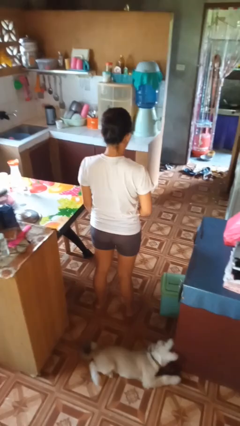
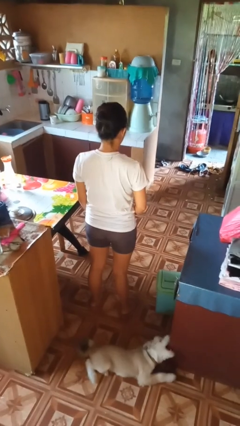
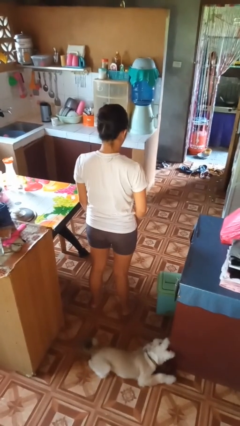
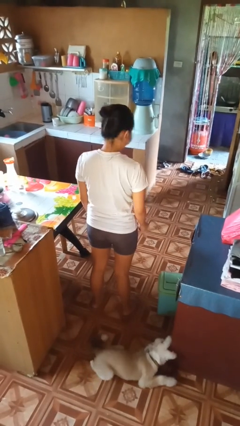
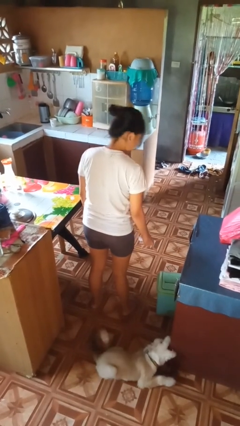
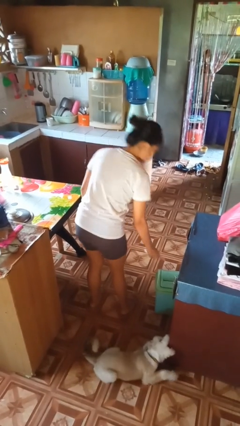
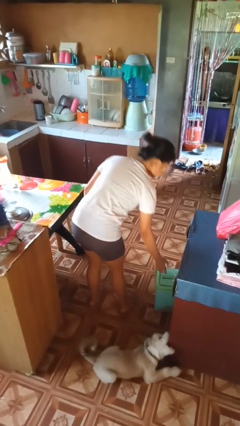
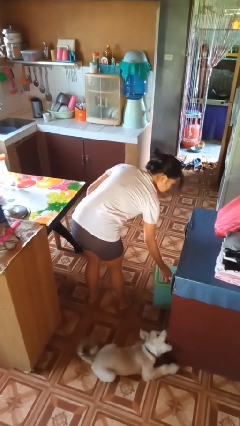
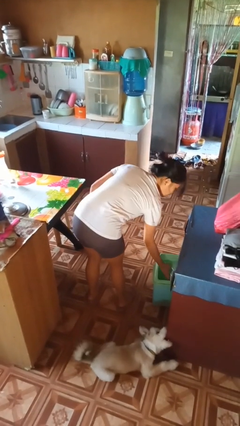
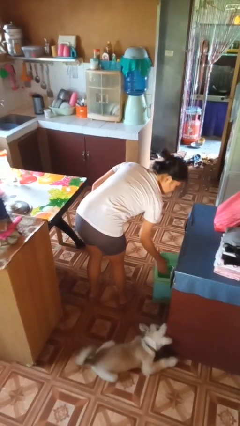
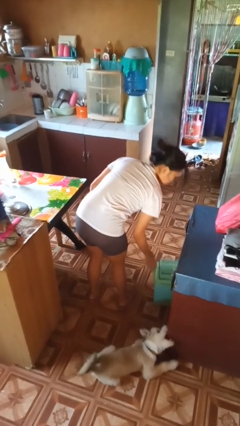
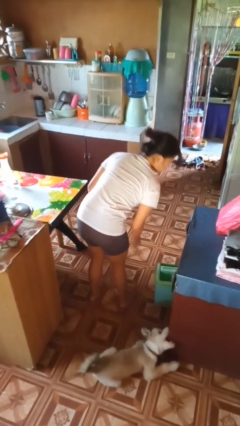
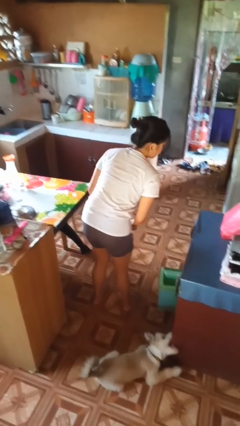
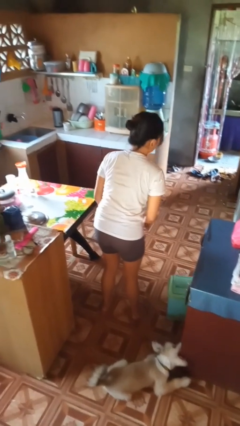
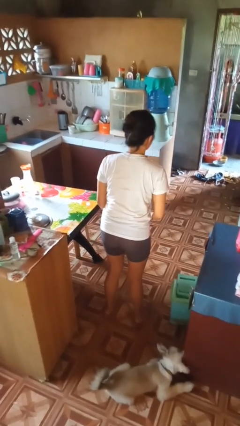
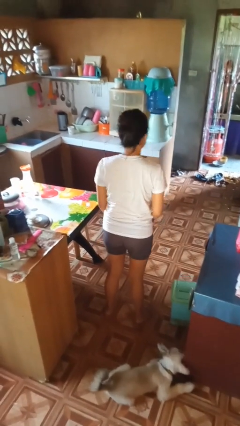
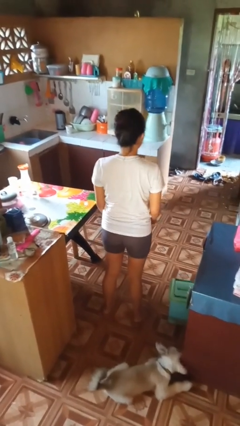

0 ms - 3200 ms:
person discards trash

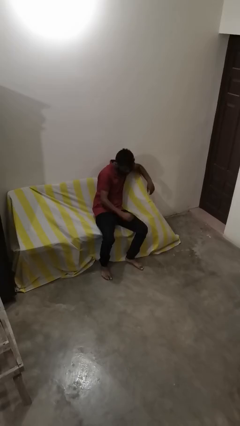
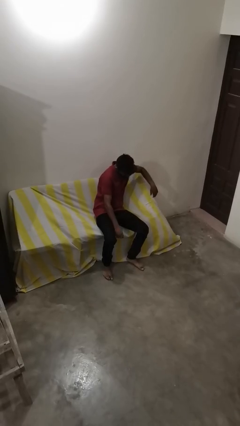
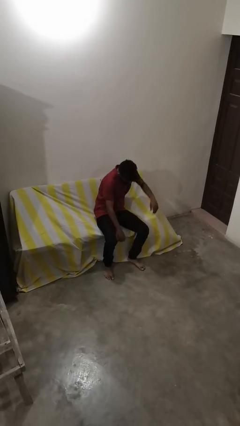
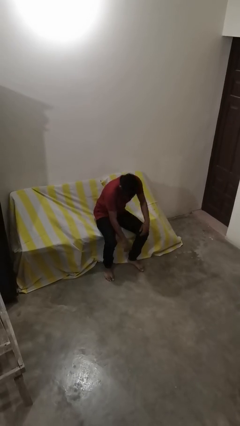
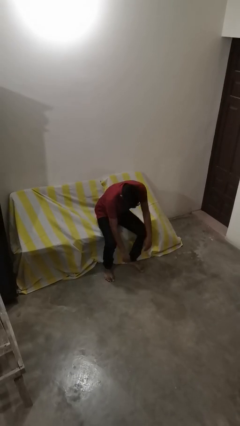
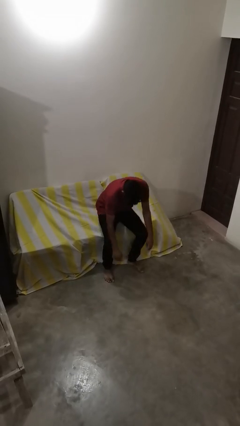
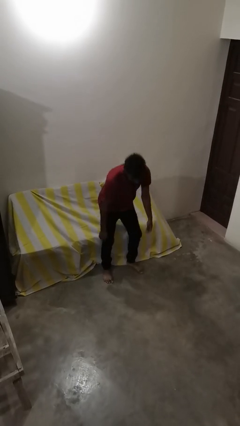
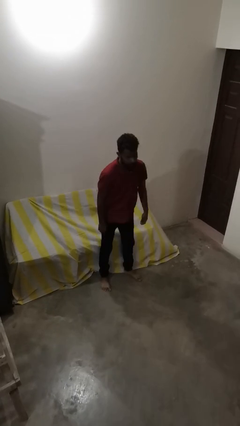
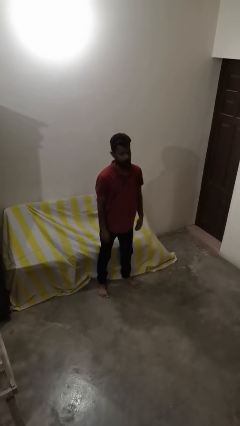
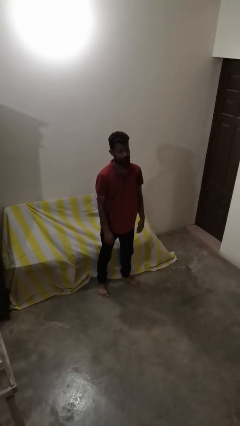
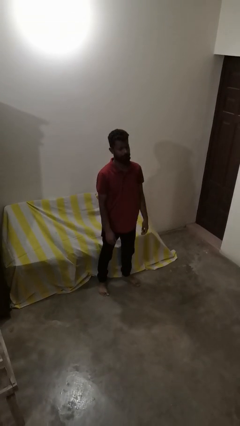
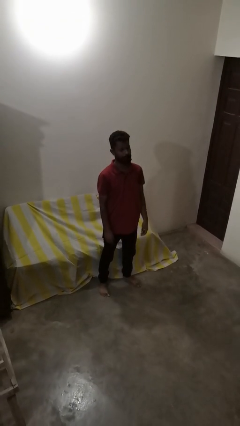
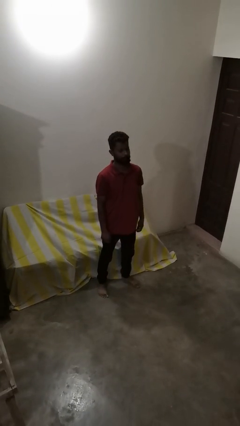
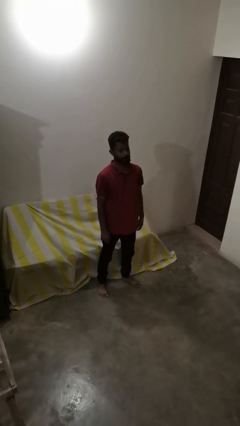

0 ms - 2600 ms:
person stands up

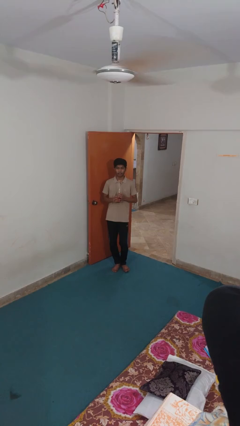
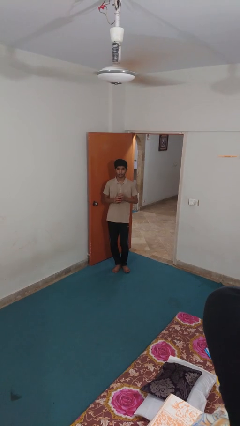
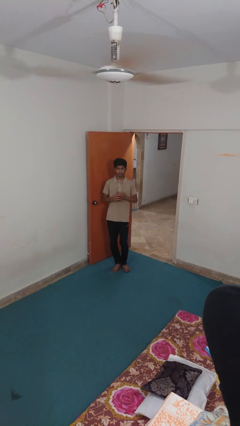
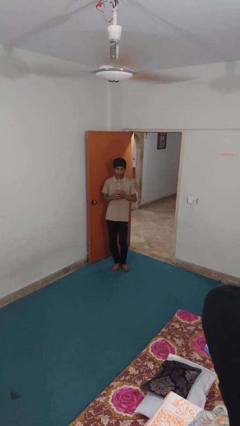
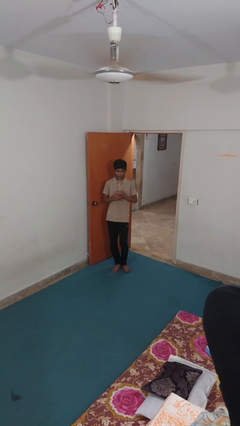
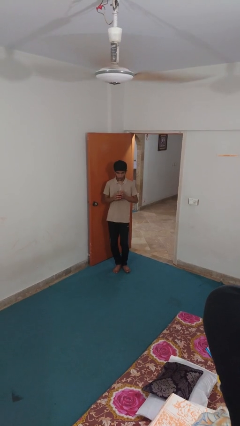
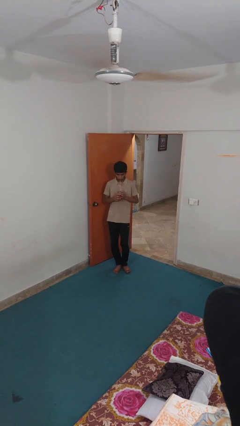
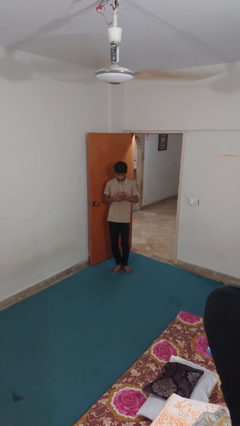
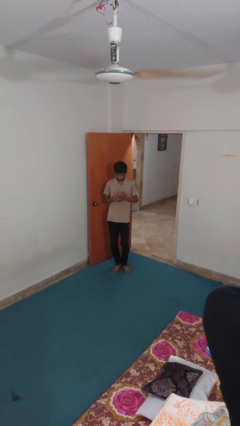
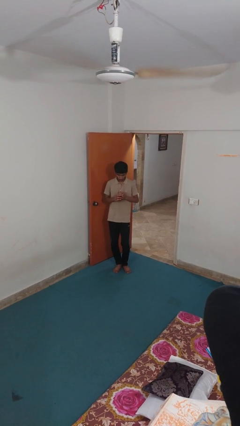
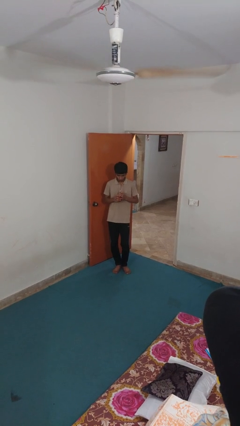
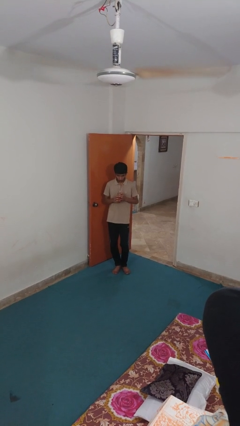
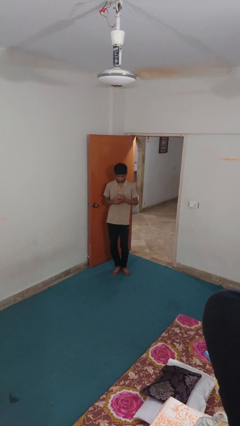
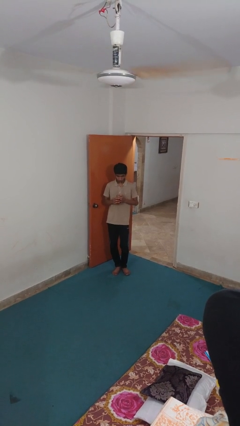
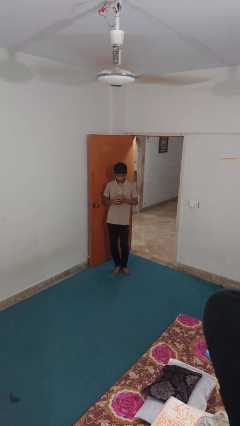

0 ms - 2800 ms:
person drinks from straw

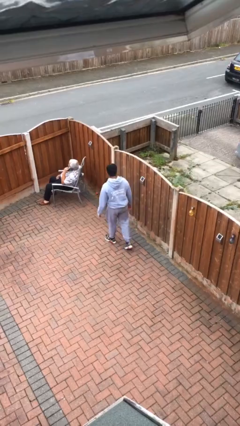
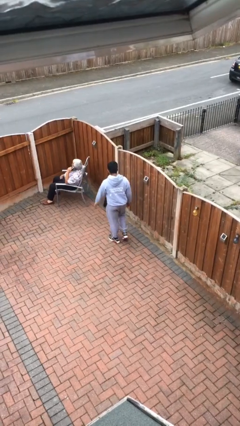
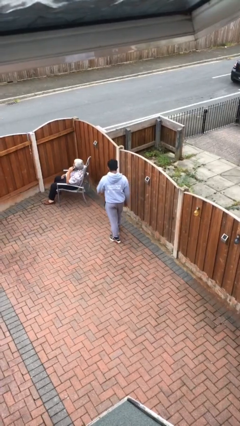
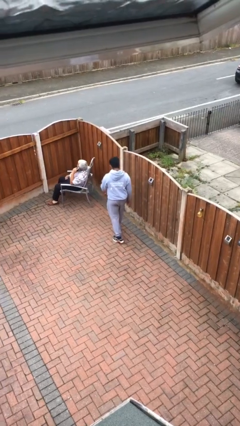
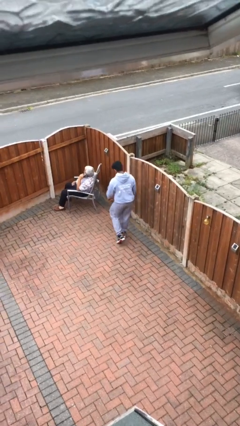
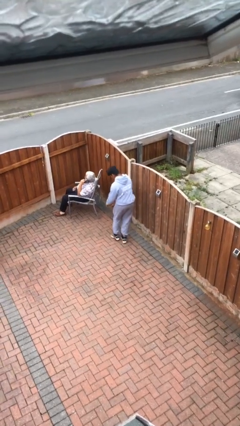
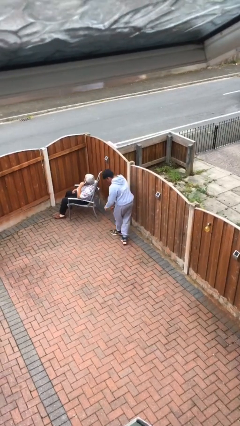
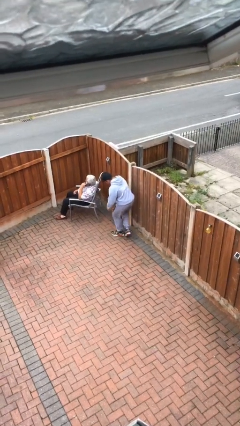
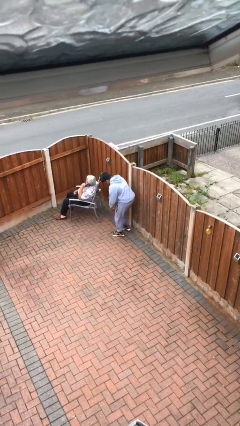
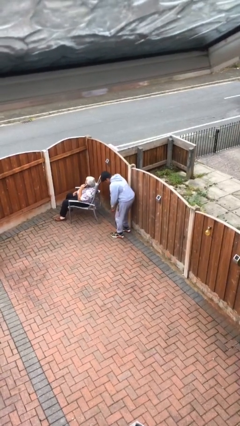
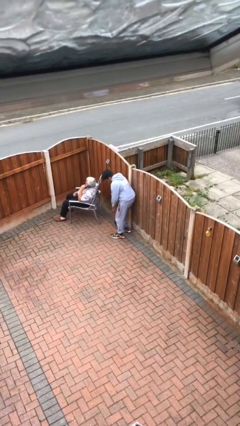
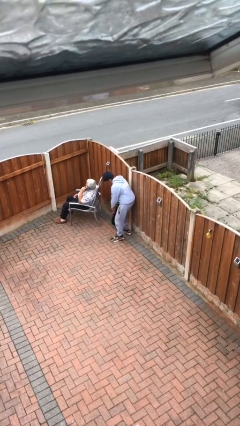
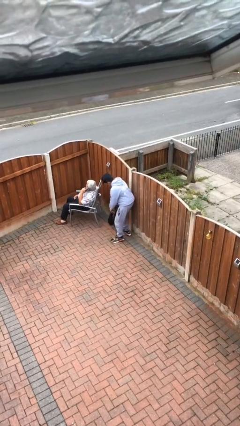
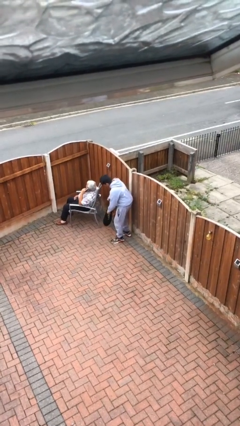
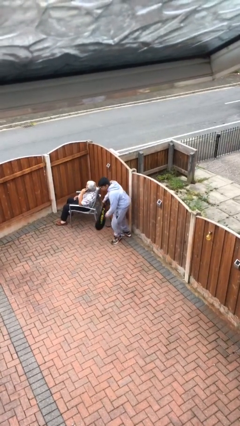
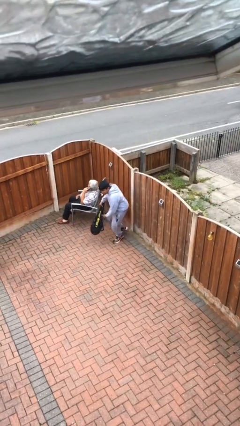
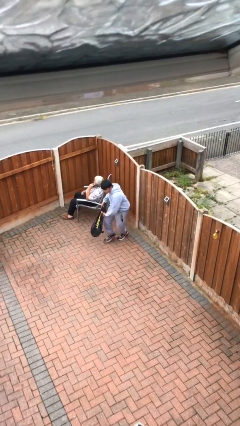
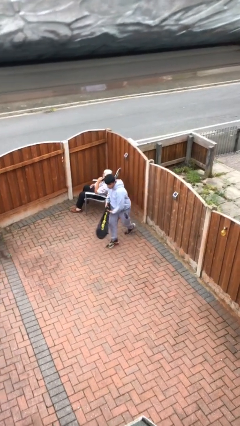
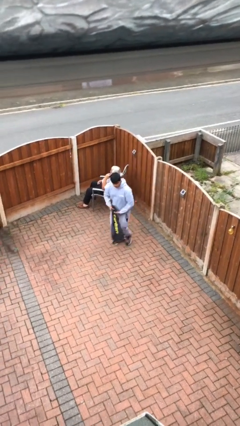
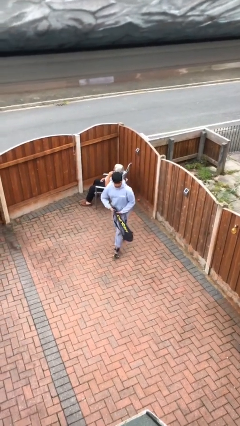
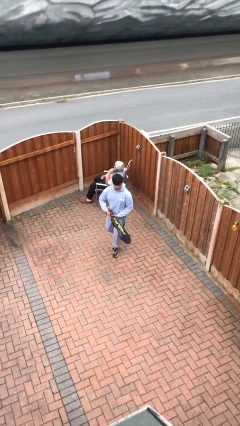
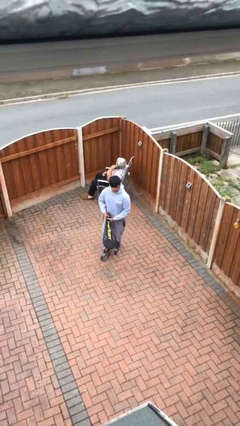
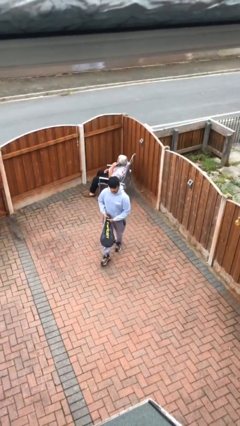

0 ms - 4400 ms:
person steals object from person

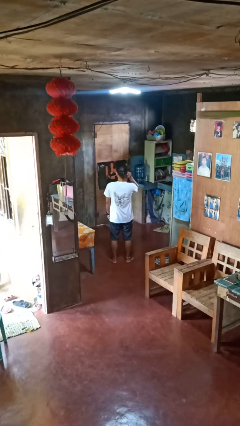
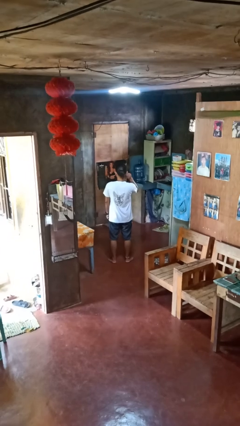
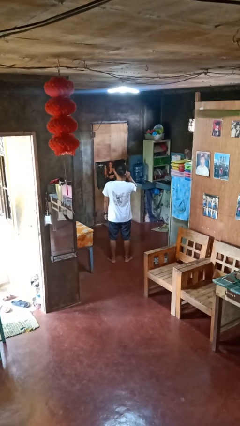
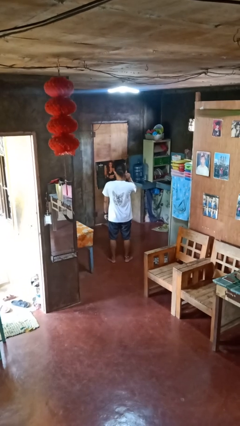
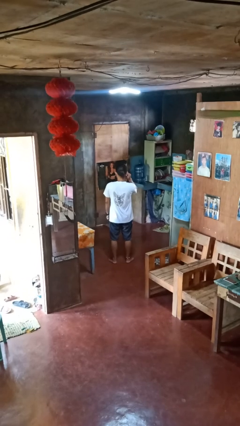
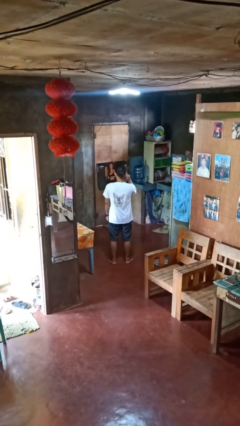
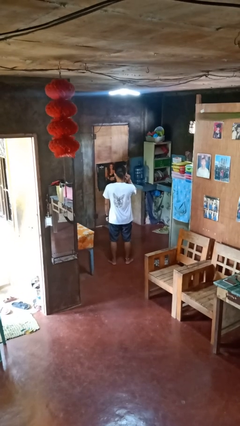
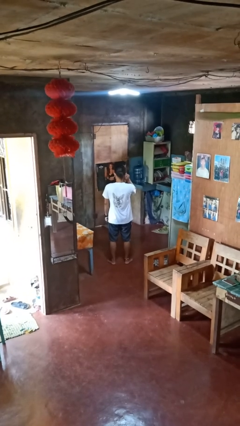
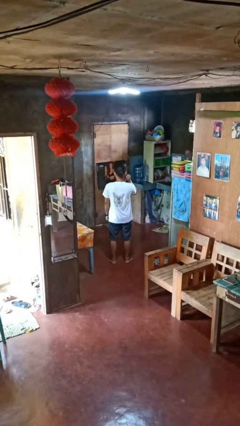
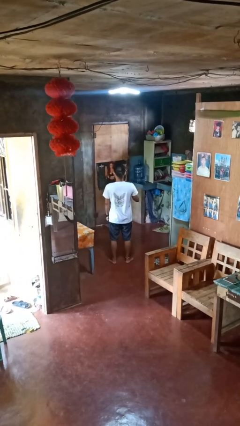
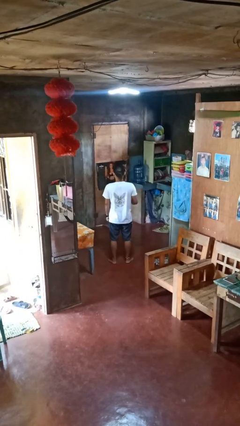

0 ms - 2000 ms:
person touches earlobe

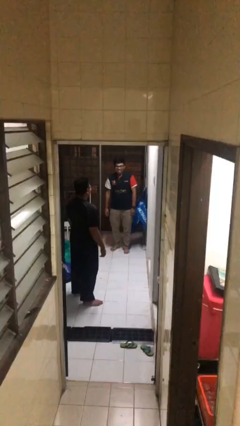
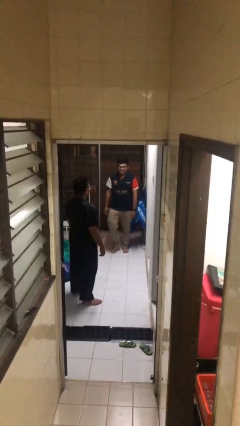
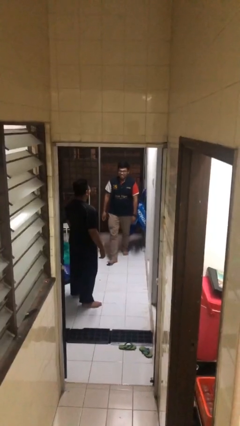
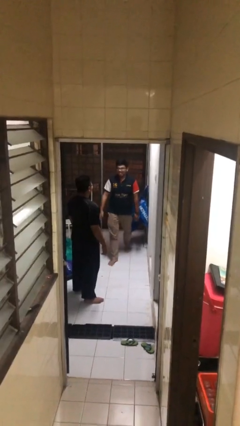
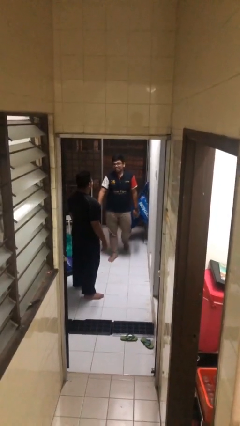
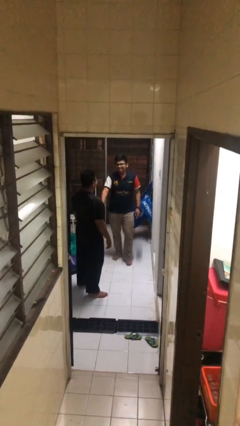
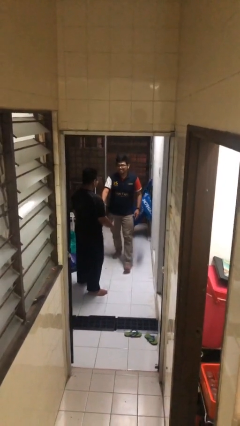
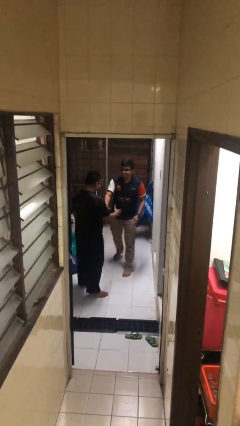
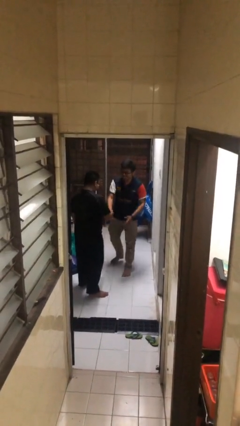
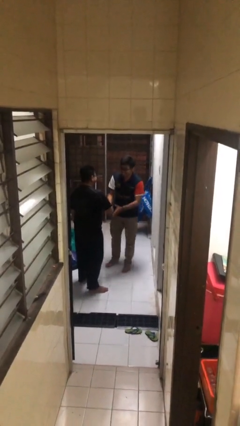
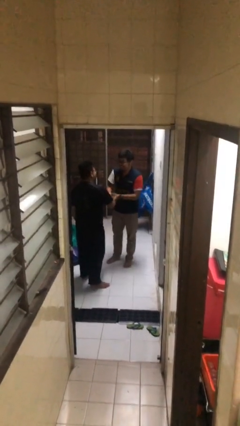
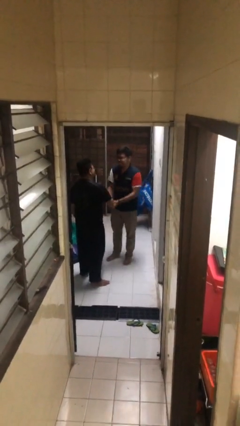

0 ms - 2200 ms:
person shakes hand

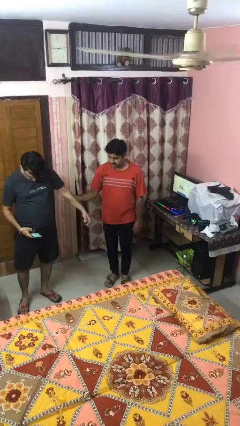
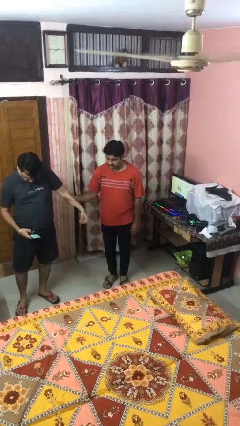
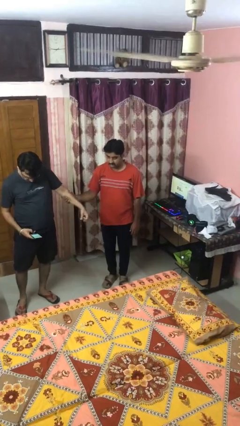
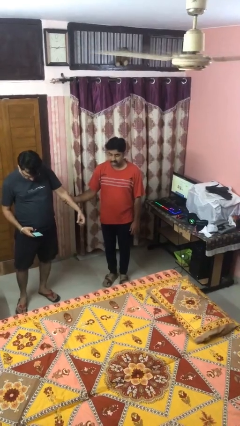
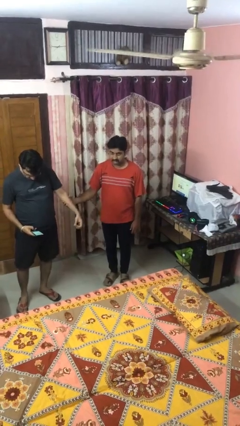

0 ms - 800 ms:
person grabs person by forearm
